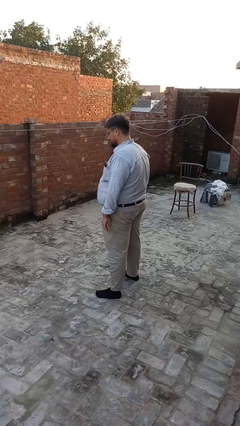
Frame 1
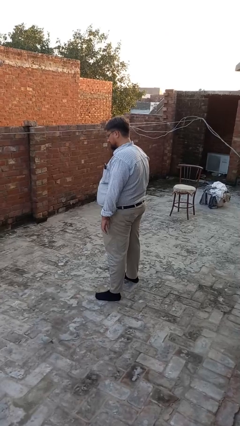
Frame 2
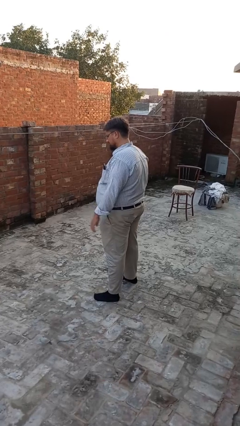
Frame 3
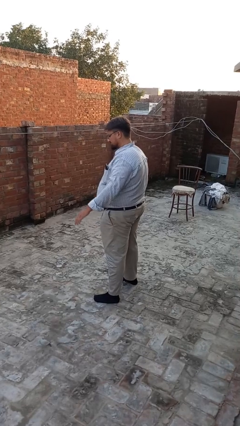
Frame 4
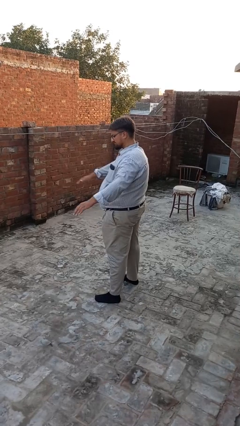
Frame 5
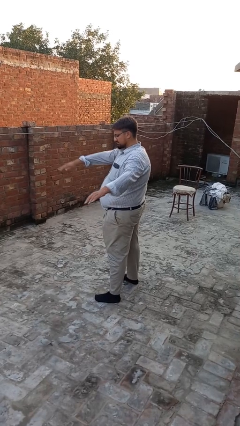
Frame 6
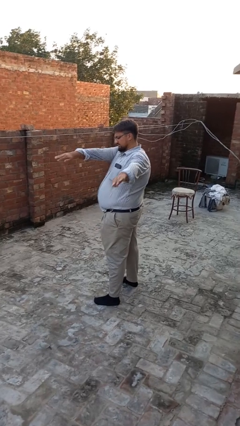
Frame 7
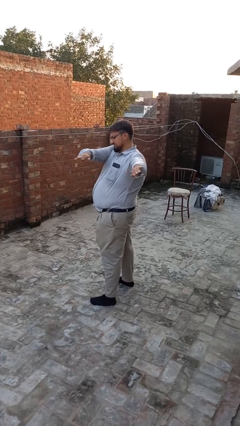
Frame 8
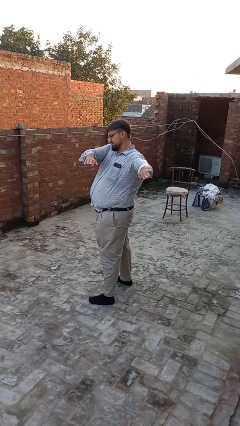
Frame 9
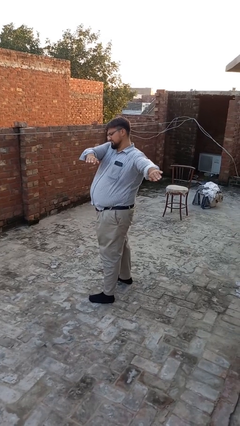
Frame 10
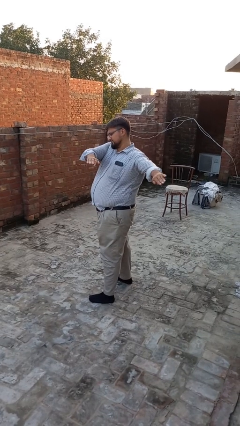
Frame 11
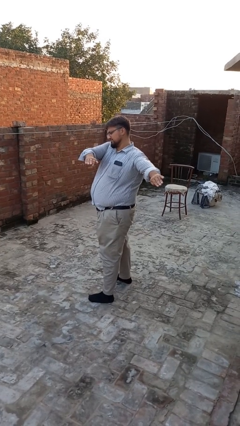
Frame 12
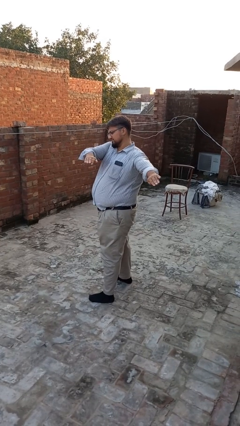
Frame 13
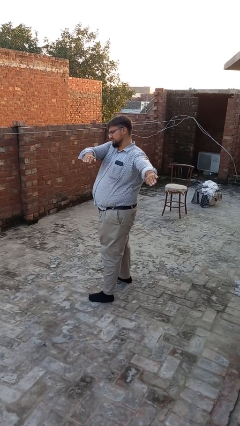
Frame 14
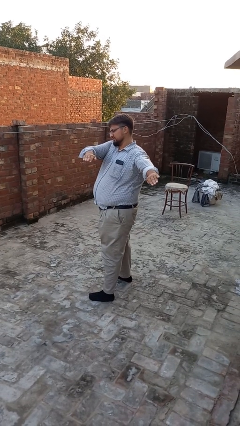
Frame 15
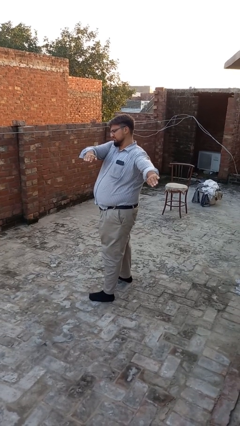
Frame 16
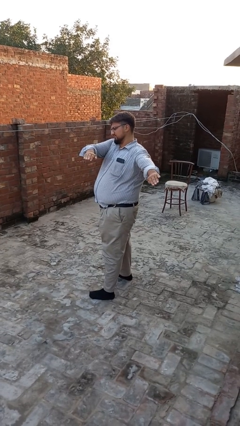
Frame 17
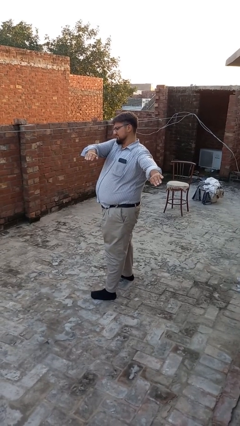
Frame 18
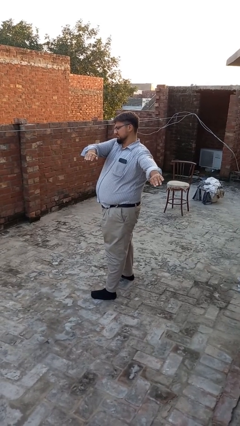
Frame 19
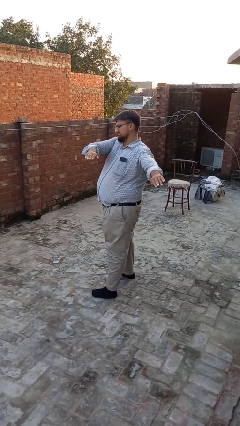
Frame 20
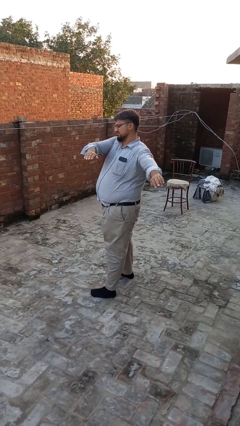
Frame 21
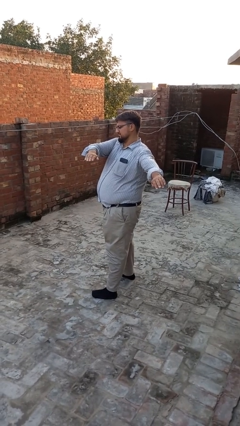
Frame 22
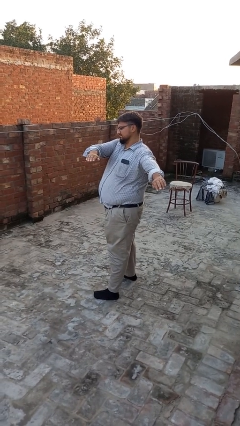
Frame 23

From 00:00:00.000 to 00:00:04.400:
person gestures swipe left

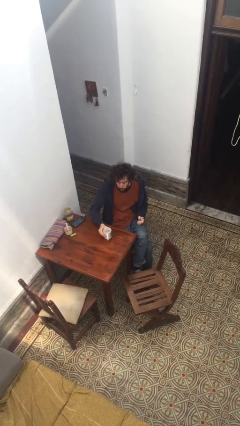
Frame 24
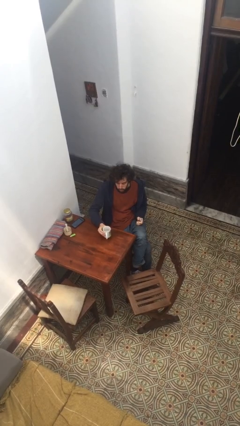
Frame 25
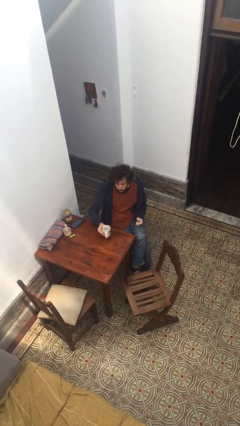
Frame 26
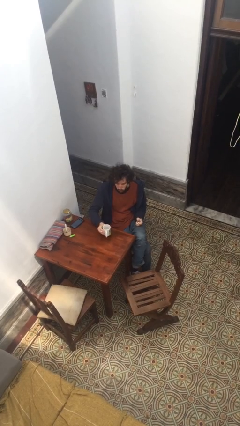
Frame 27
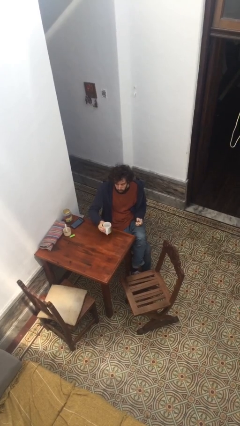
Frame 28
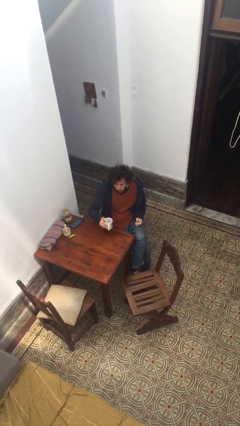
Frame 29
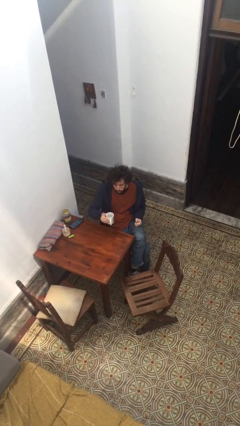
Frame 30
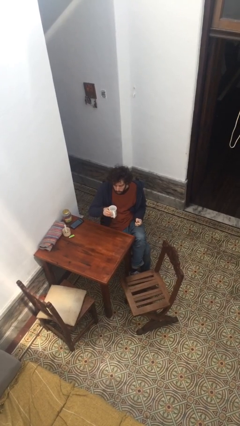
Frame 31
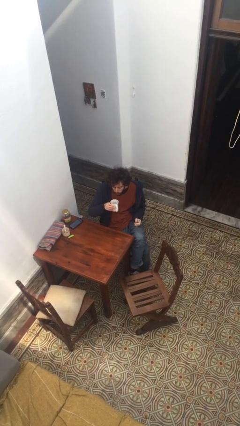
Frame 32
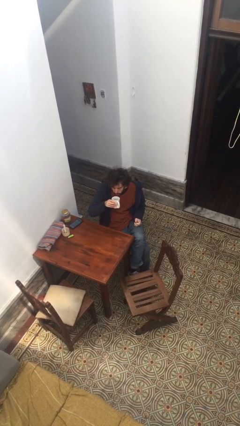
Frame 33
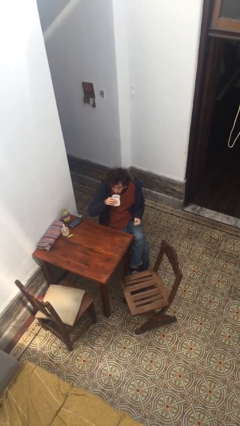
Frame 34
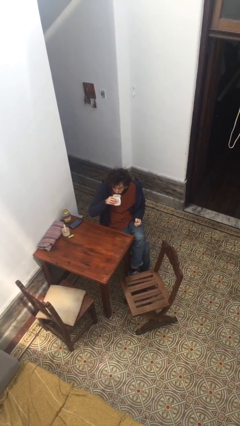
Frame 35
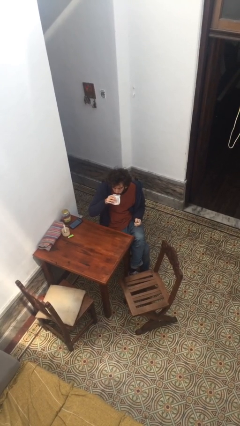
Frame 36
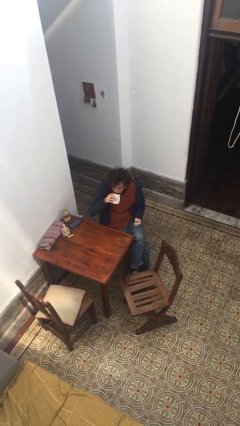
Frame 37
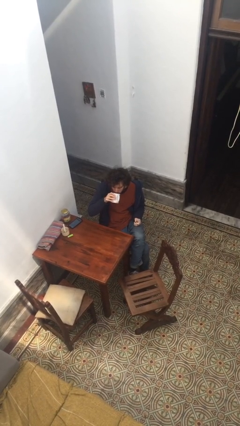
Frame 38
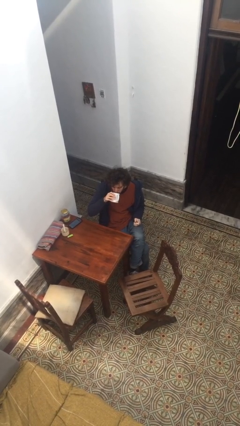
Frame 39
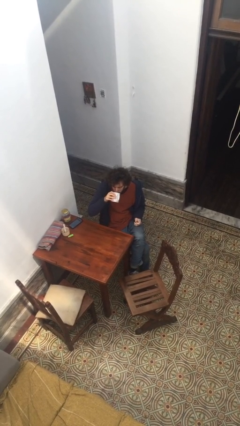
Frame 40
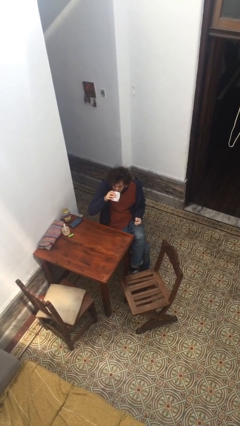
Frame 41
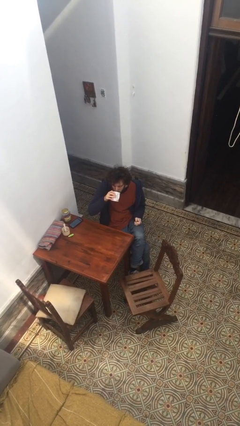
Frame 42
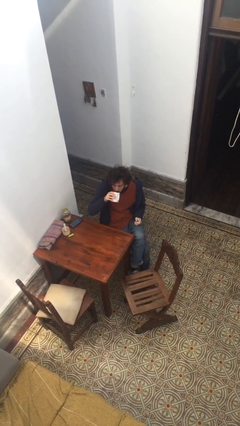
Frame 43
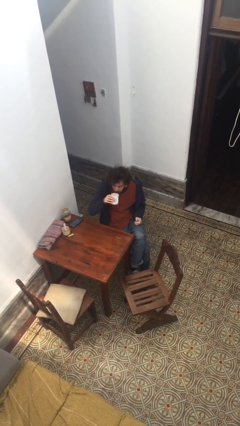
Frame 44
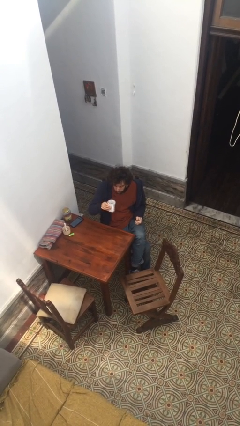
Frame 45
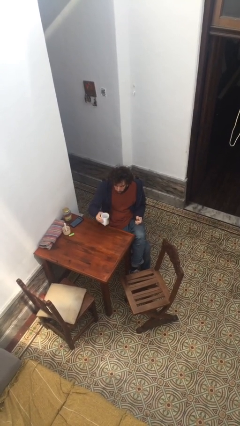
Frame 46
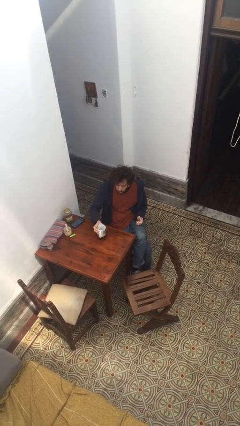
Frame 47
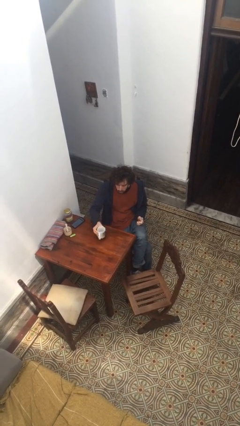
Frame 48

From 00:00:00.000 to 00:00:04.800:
person drinks from cup

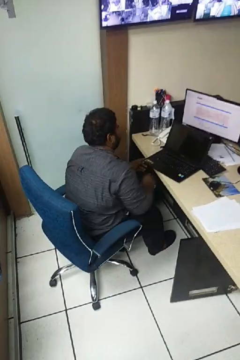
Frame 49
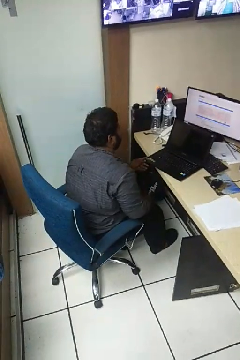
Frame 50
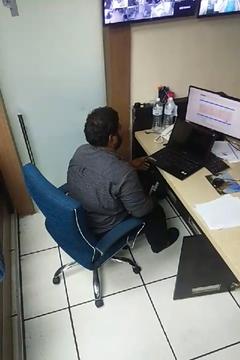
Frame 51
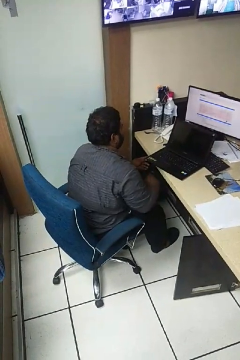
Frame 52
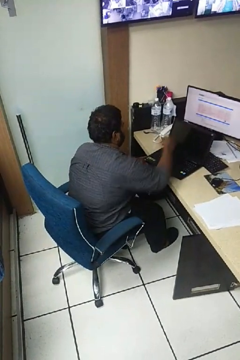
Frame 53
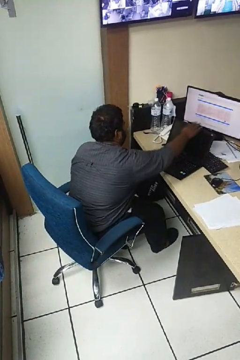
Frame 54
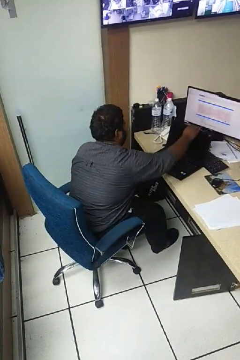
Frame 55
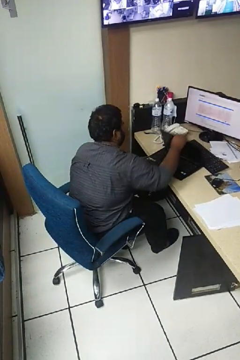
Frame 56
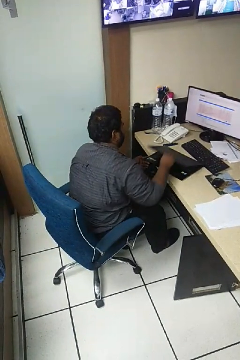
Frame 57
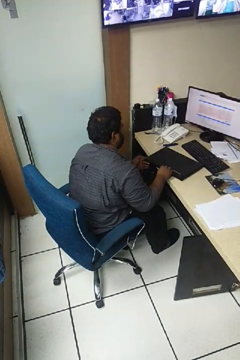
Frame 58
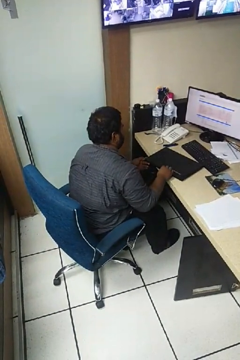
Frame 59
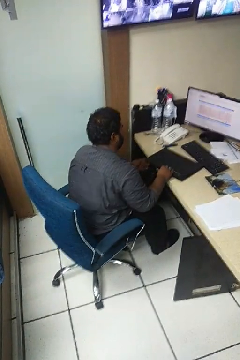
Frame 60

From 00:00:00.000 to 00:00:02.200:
person closes laptop

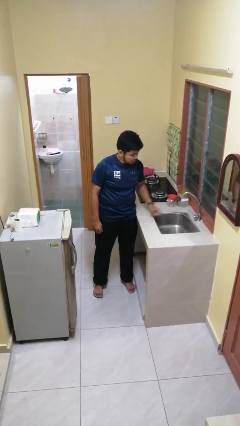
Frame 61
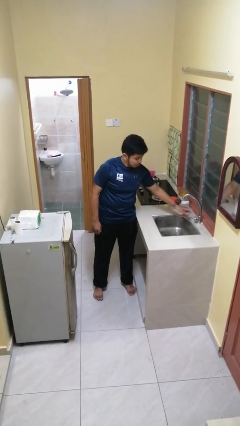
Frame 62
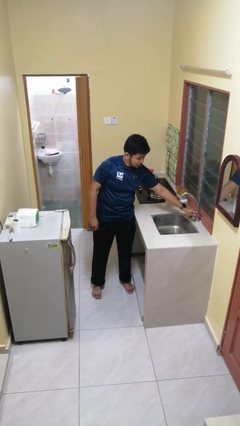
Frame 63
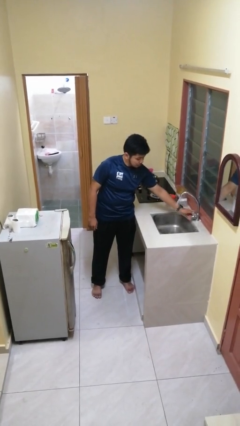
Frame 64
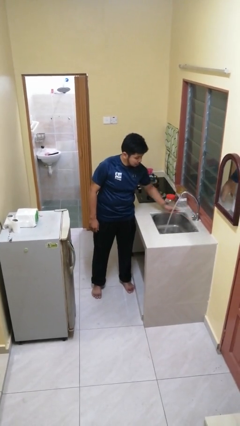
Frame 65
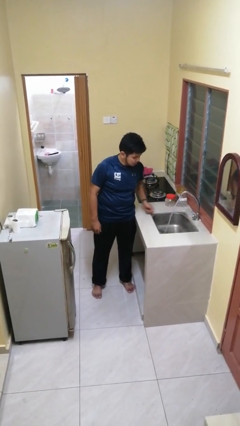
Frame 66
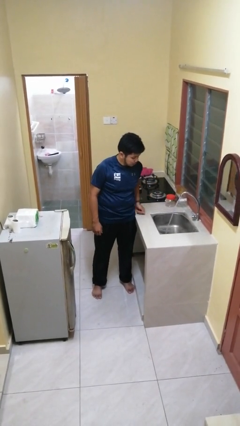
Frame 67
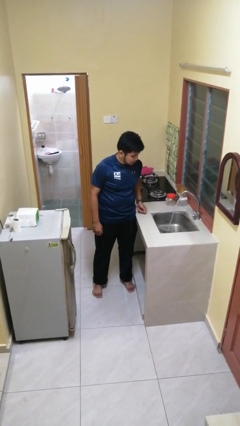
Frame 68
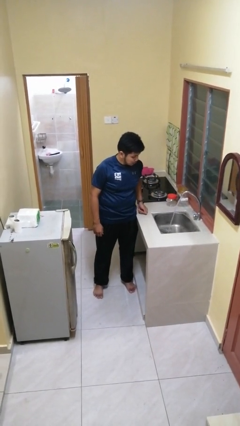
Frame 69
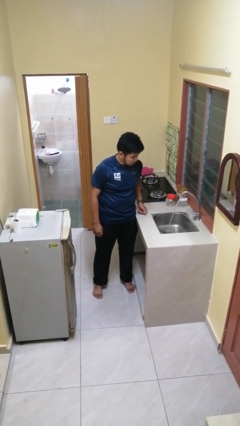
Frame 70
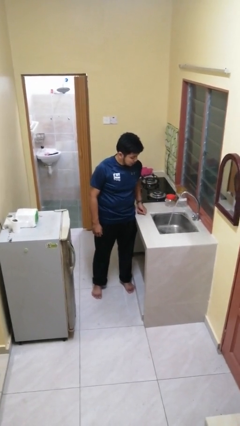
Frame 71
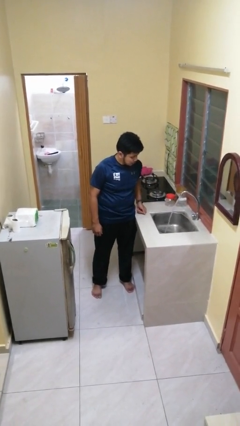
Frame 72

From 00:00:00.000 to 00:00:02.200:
person turns on faucet

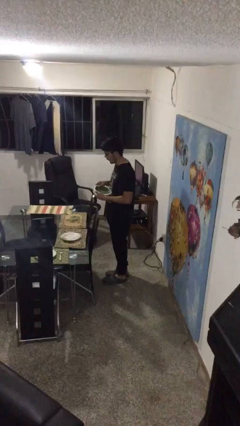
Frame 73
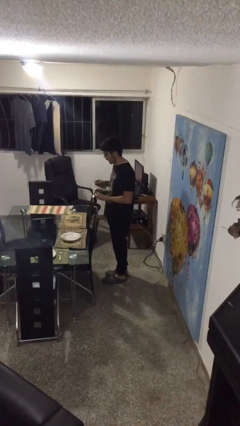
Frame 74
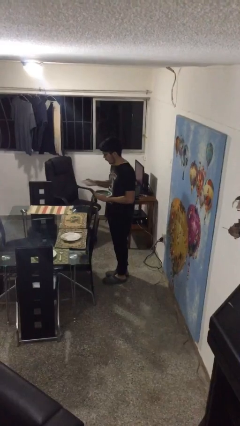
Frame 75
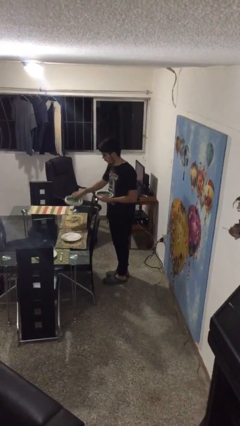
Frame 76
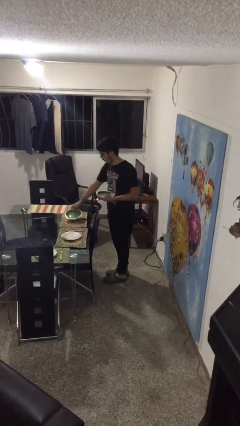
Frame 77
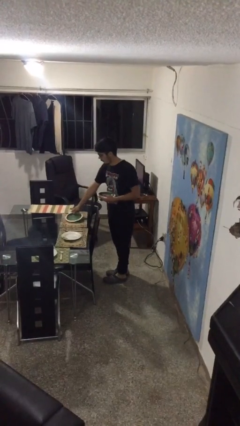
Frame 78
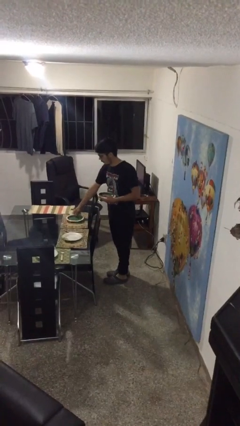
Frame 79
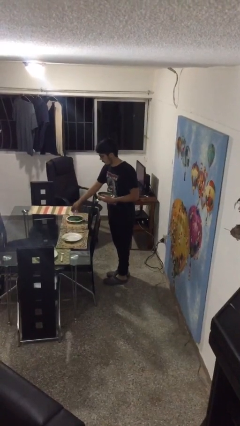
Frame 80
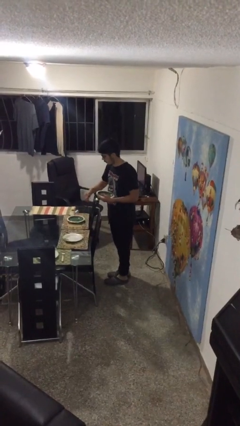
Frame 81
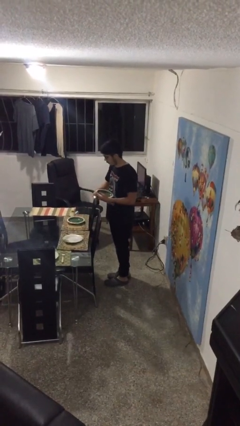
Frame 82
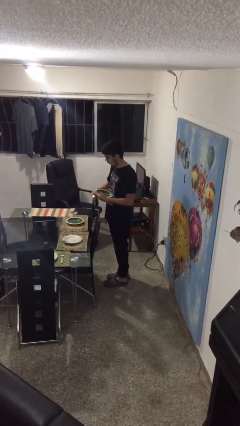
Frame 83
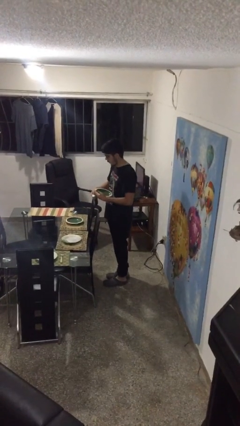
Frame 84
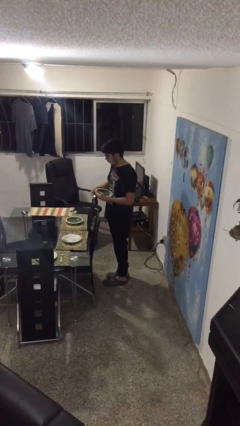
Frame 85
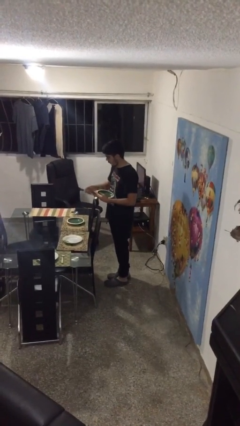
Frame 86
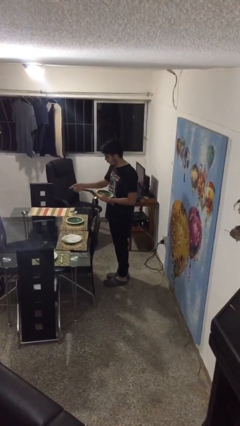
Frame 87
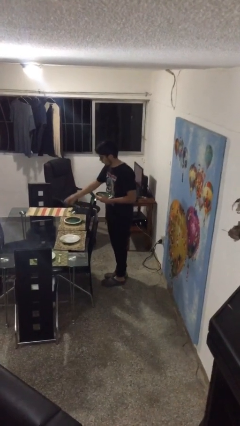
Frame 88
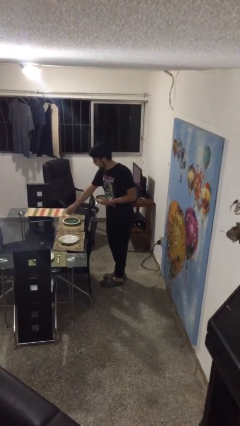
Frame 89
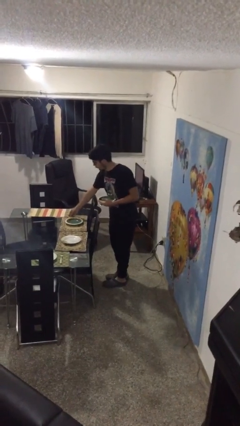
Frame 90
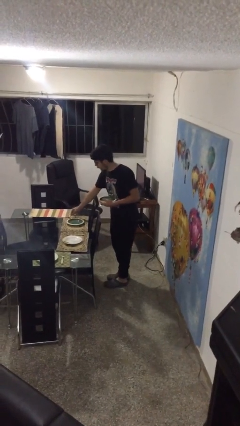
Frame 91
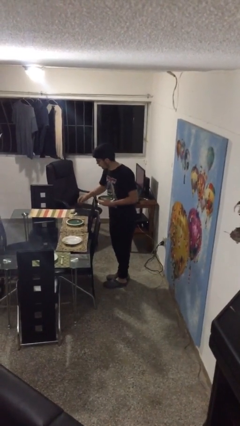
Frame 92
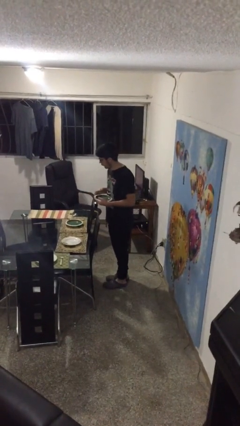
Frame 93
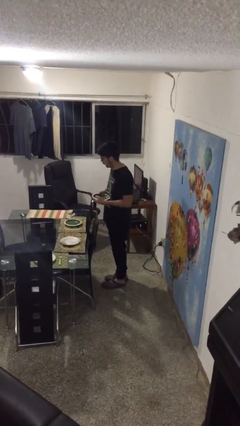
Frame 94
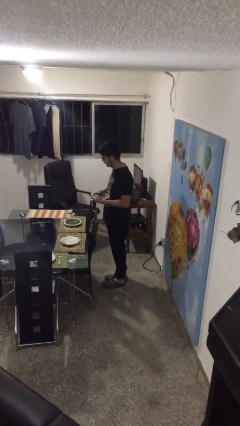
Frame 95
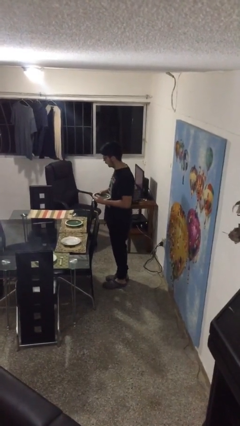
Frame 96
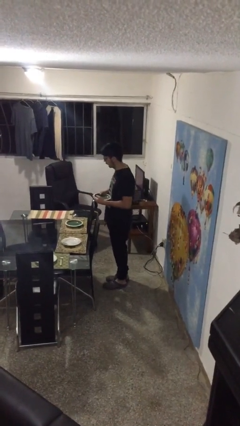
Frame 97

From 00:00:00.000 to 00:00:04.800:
person sets table
